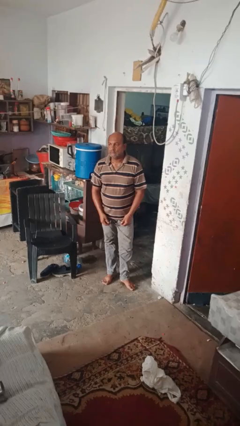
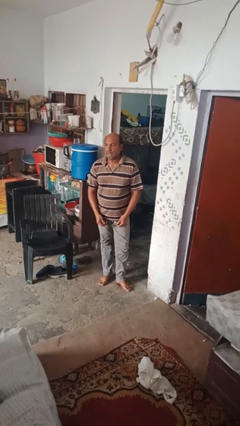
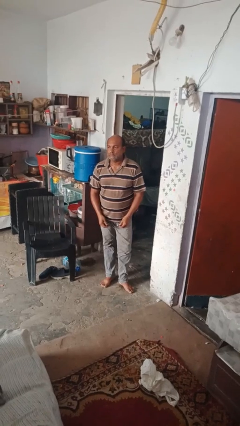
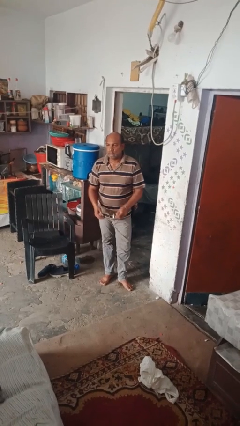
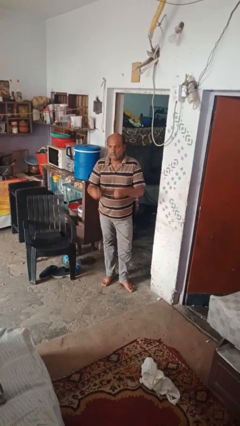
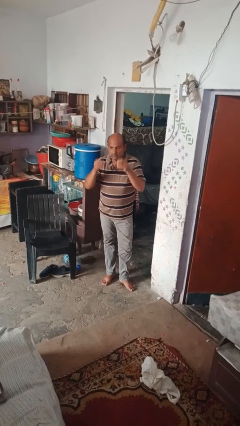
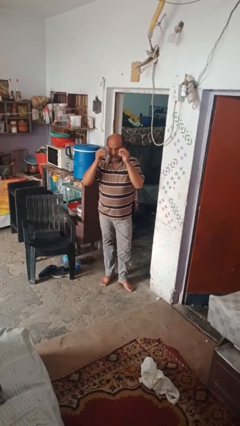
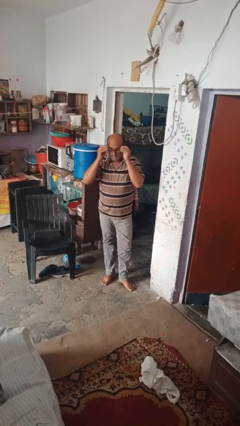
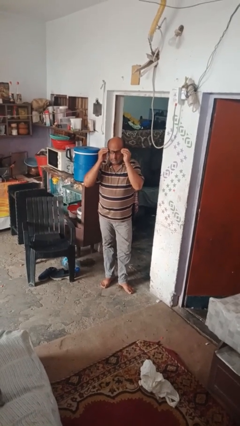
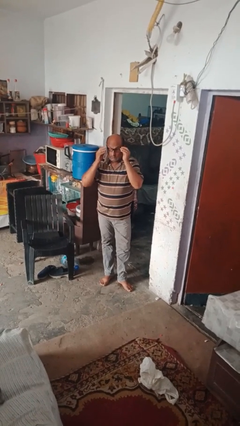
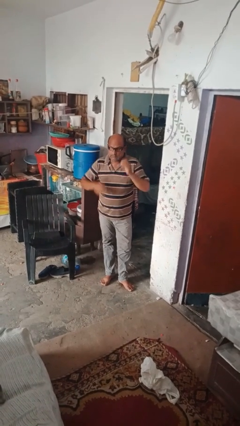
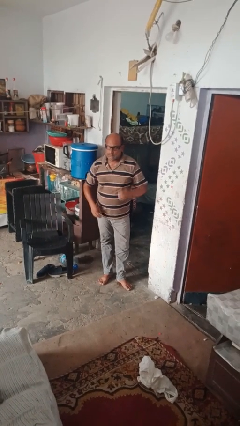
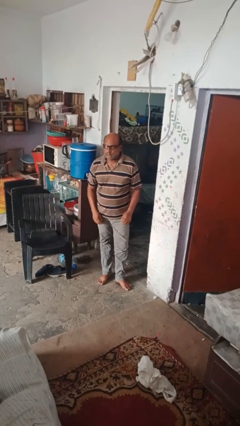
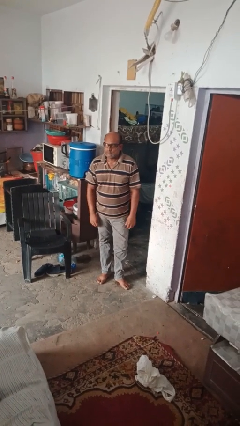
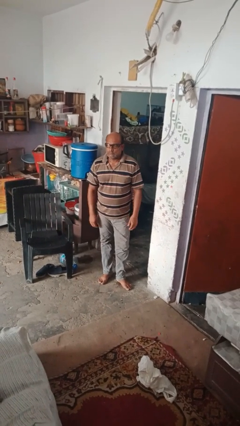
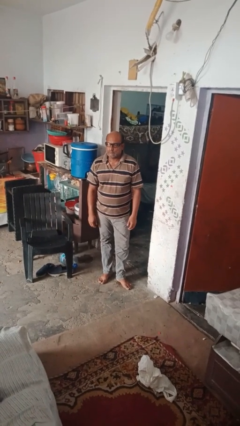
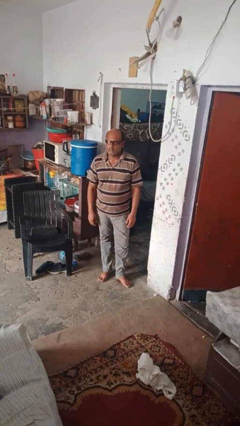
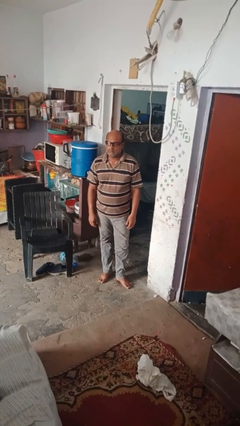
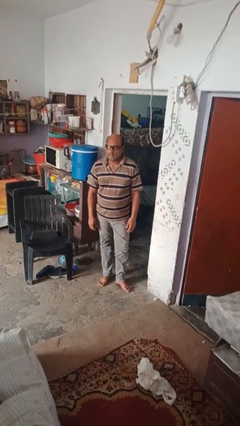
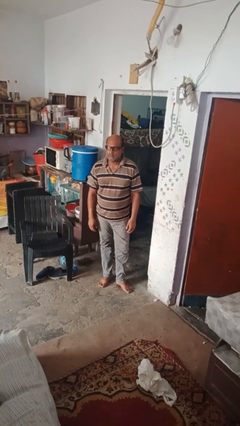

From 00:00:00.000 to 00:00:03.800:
person puts on glasses

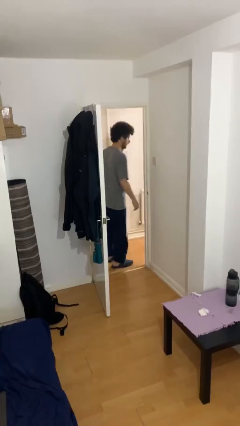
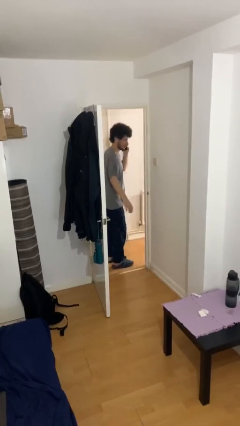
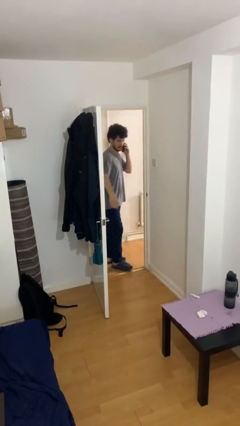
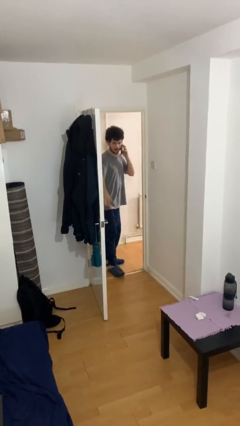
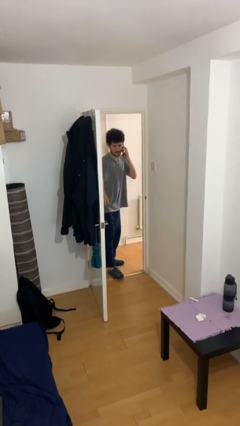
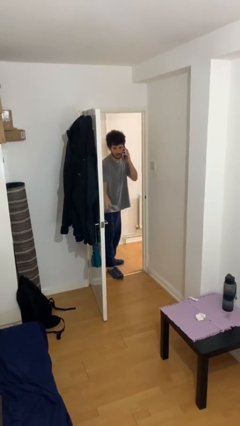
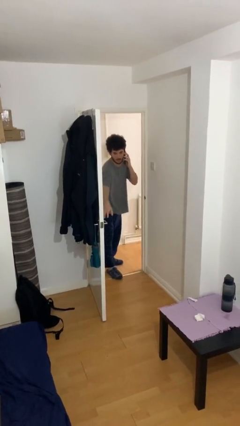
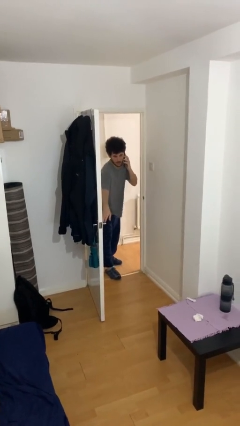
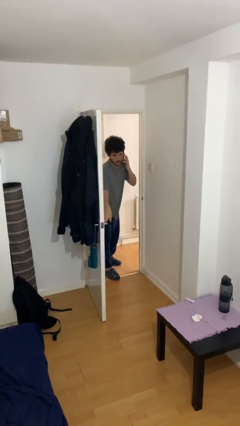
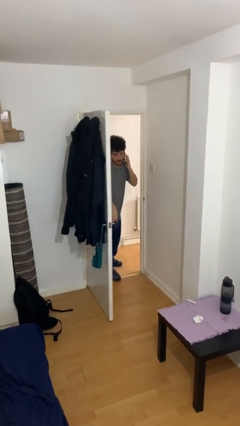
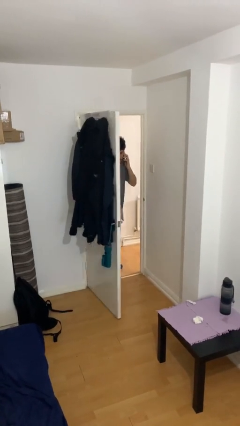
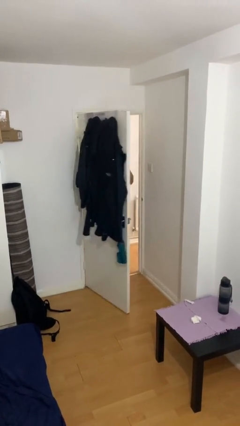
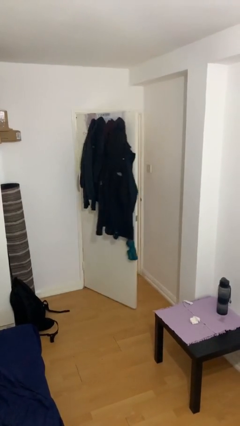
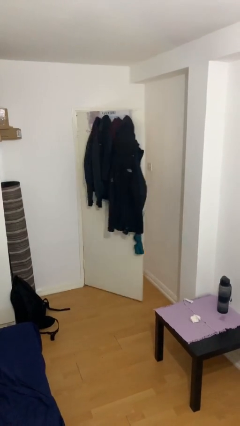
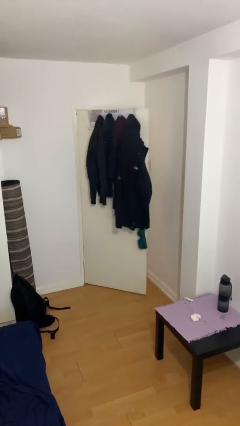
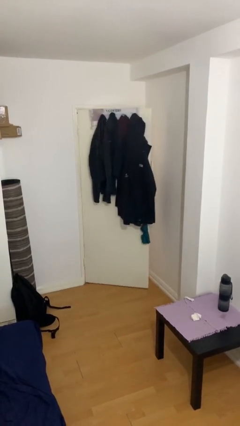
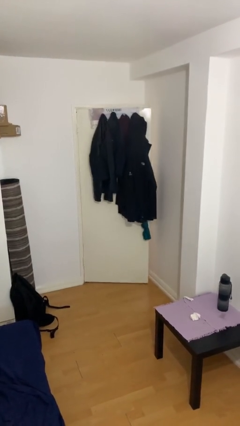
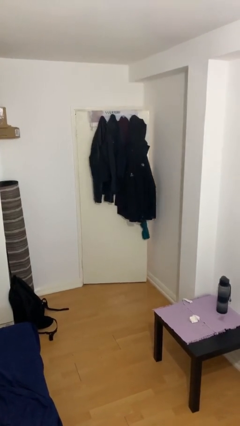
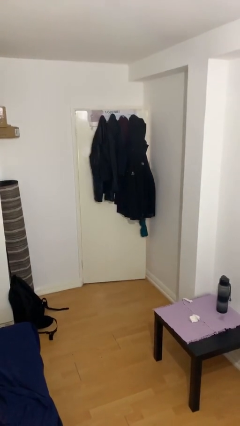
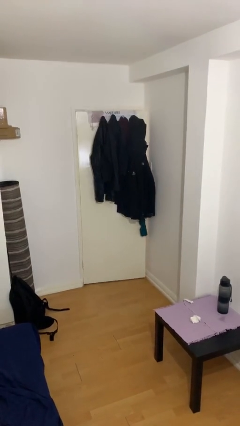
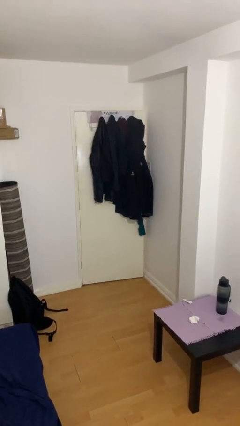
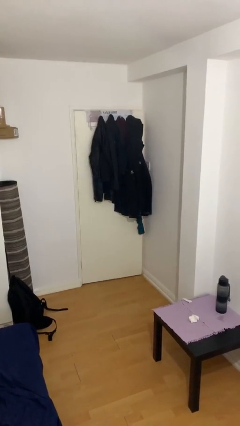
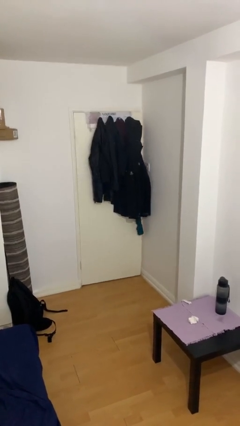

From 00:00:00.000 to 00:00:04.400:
person closes facility door

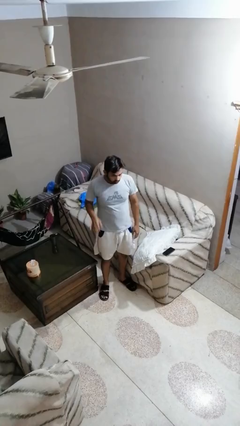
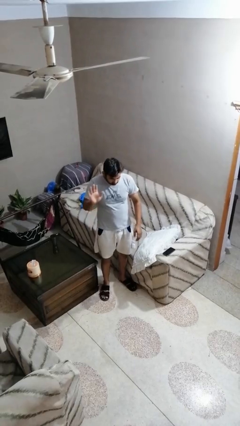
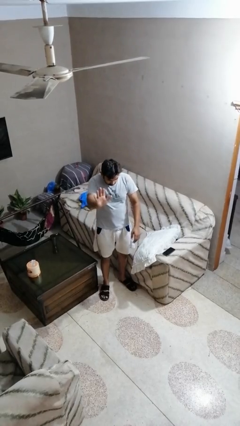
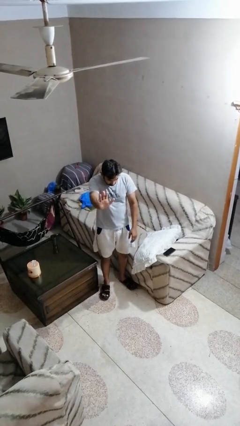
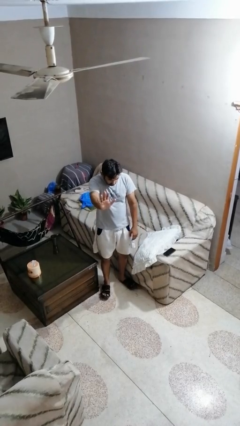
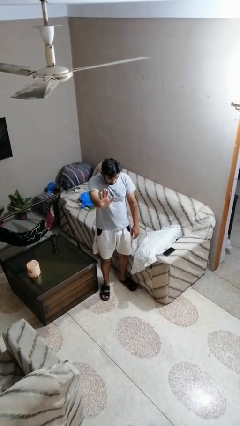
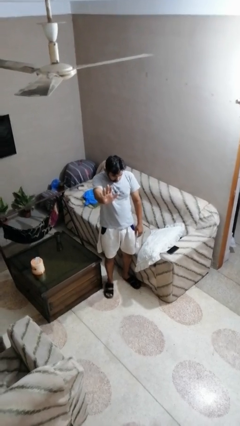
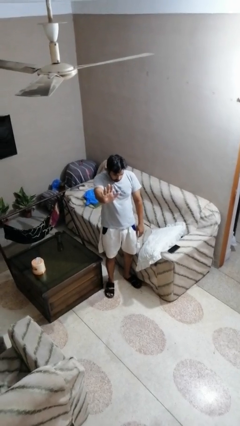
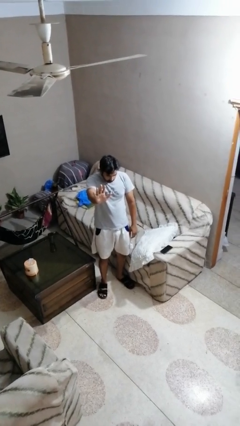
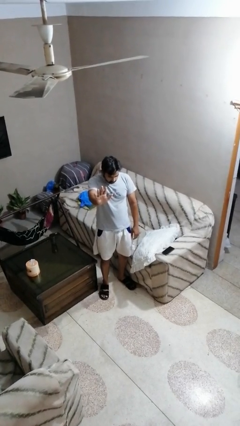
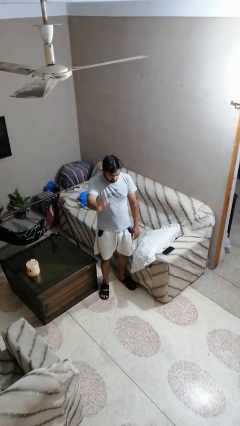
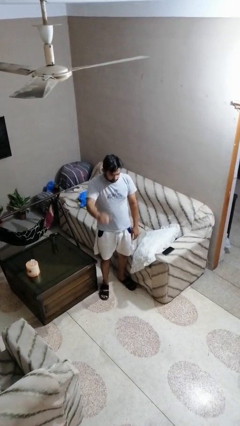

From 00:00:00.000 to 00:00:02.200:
person gestures stop

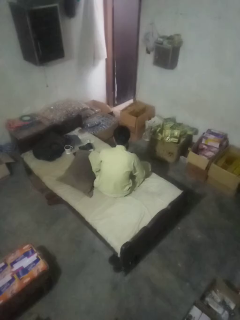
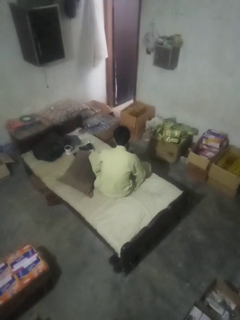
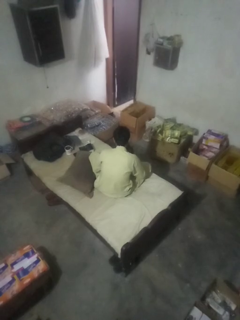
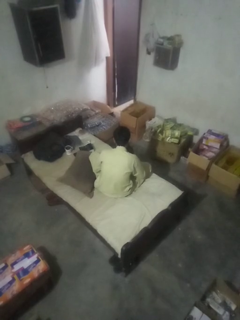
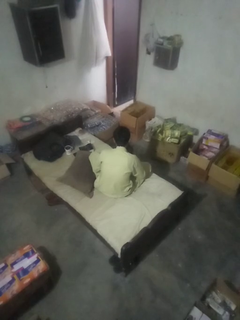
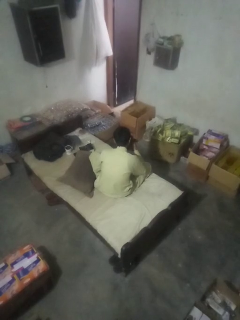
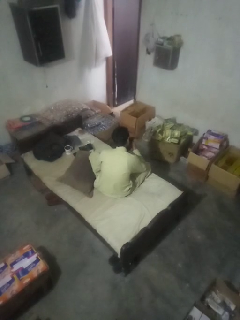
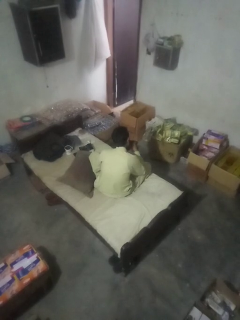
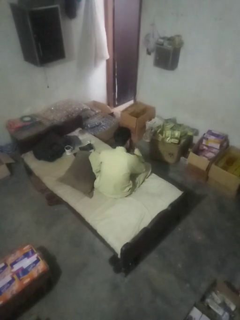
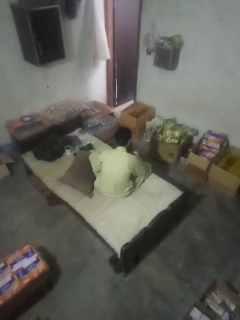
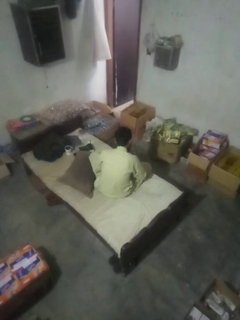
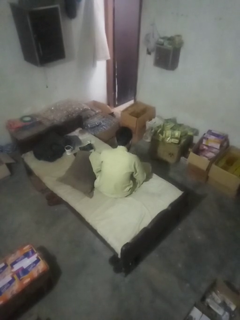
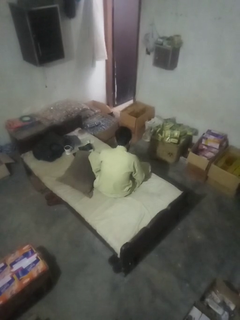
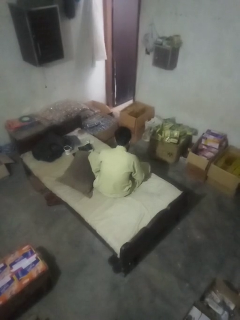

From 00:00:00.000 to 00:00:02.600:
person blows nose

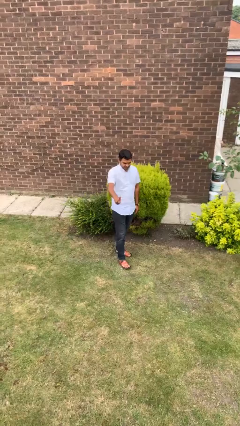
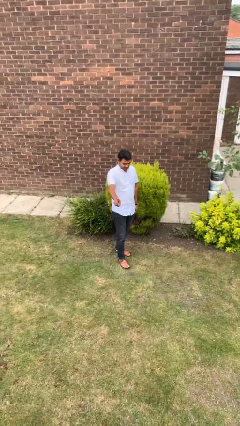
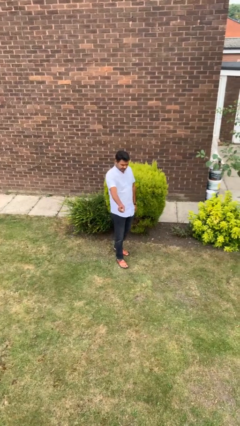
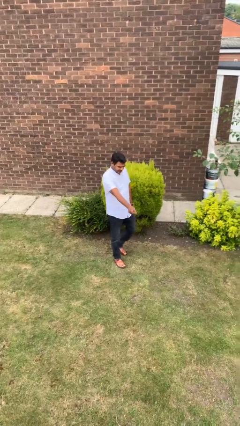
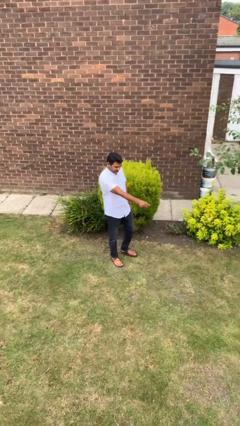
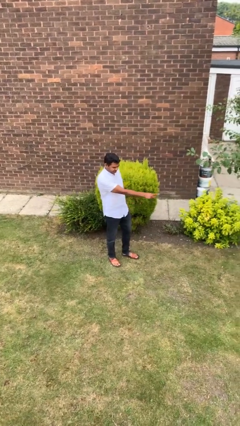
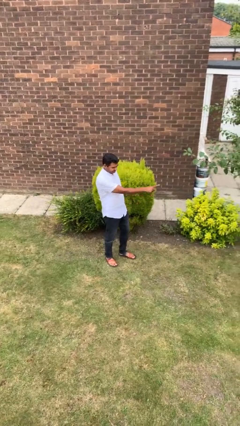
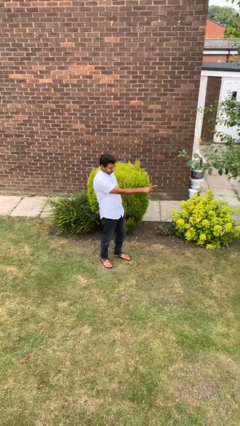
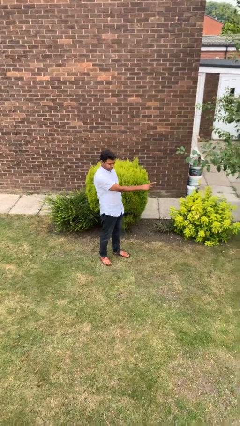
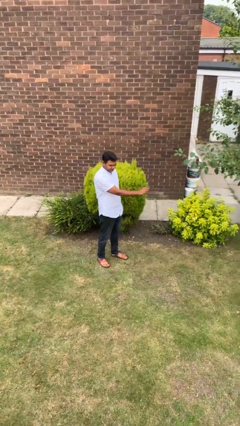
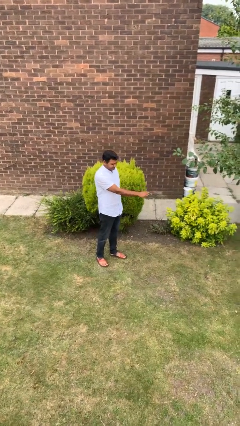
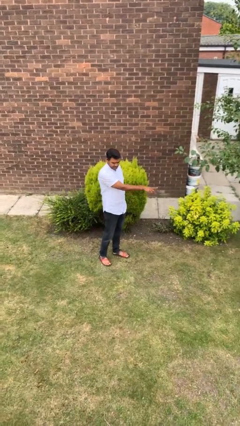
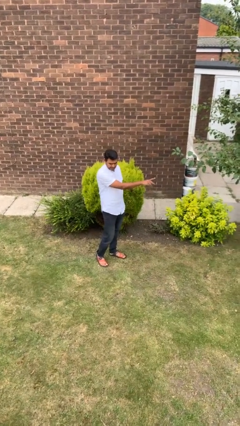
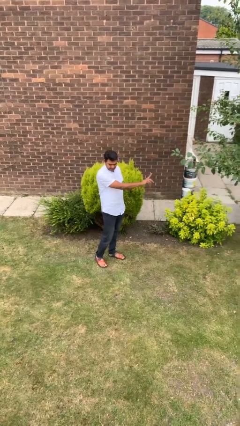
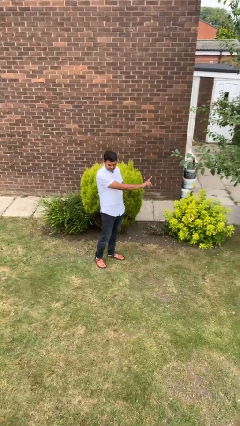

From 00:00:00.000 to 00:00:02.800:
person gestures swipe left

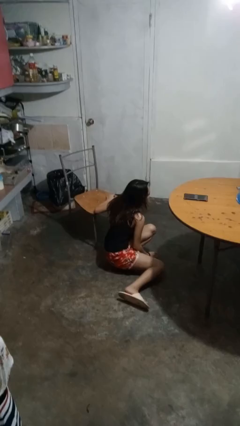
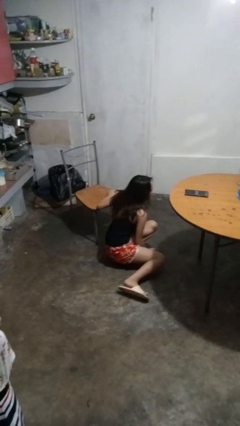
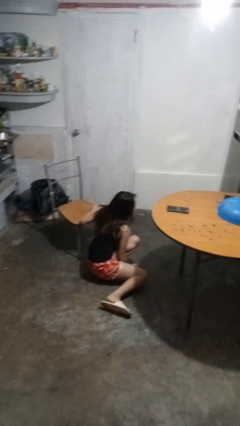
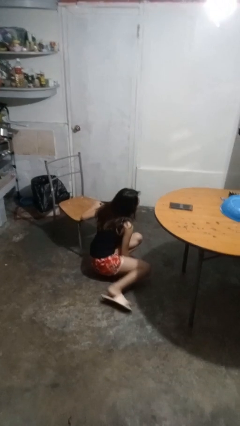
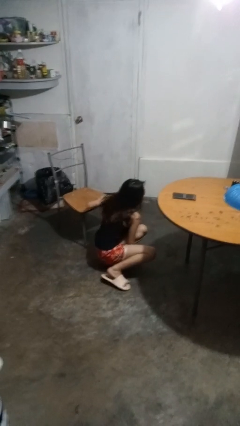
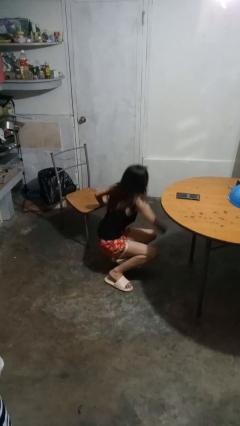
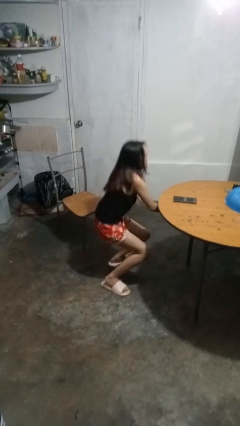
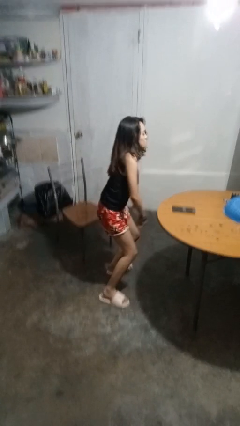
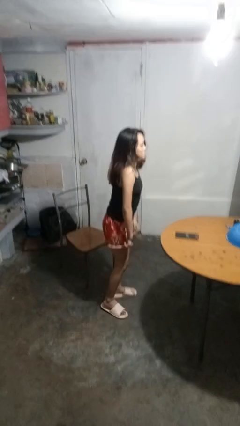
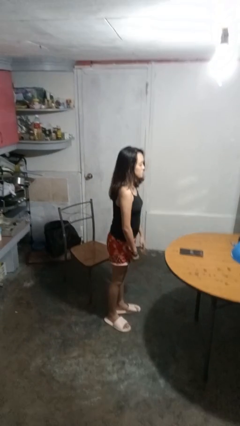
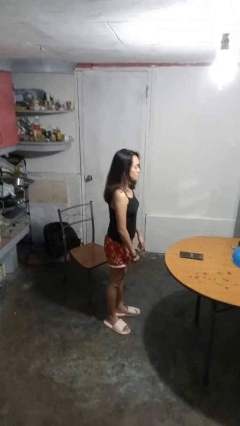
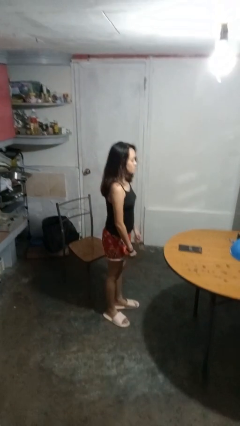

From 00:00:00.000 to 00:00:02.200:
person stands up from floor
